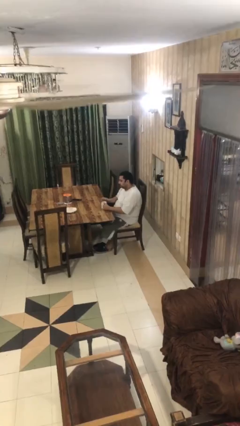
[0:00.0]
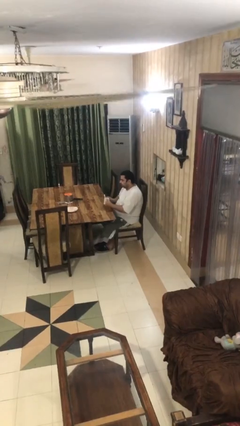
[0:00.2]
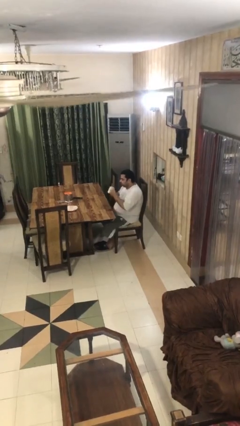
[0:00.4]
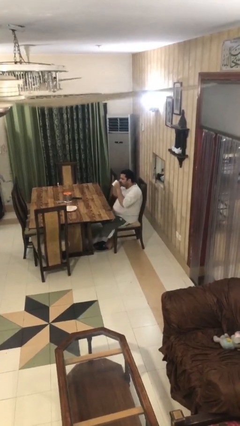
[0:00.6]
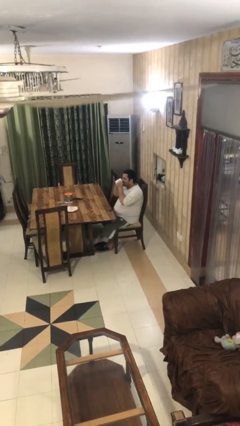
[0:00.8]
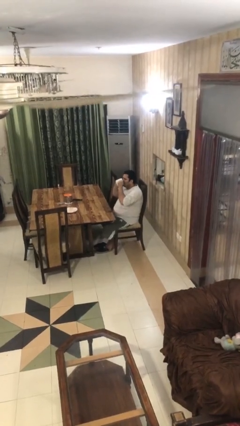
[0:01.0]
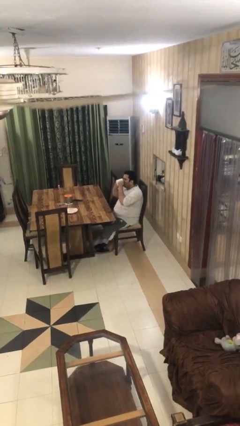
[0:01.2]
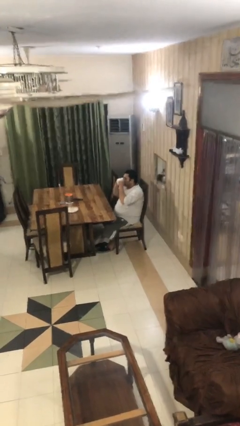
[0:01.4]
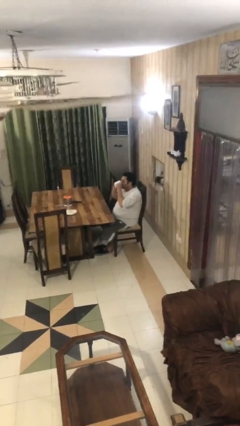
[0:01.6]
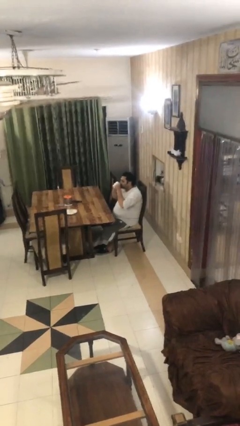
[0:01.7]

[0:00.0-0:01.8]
person drinks from mug

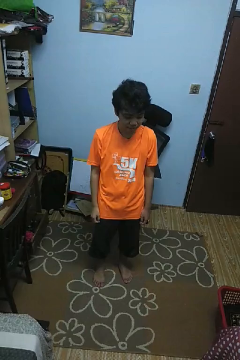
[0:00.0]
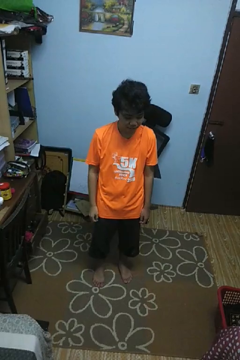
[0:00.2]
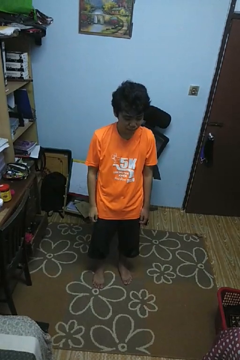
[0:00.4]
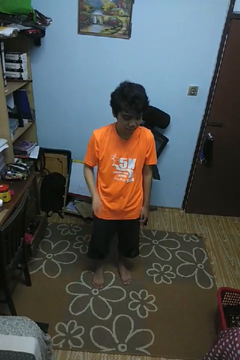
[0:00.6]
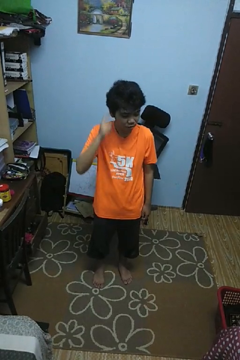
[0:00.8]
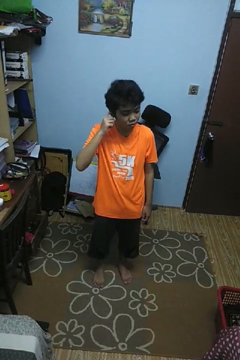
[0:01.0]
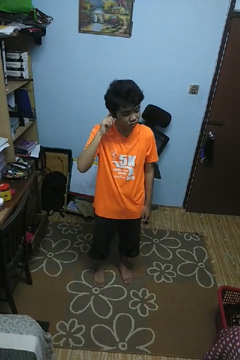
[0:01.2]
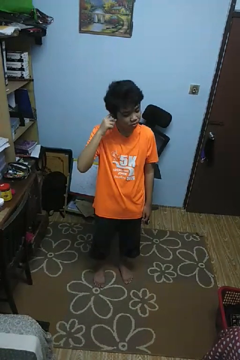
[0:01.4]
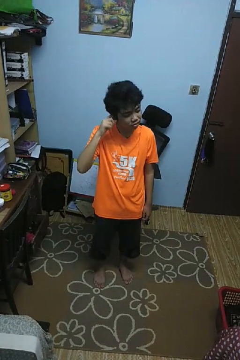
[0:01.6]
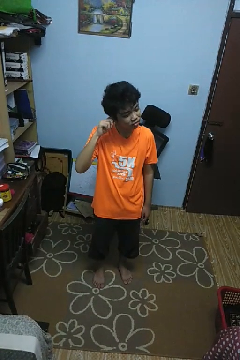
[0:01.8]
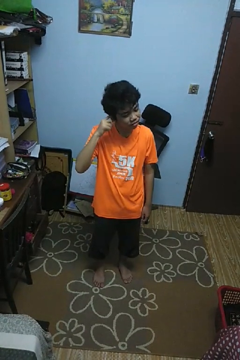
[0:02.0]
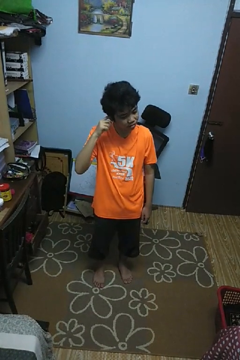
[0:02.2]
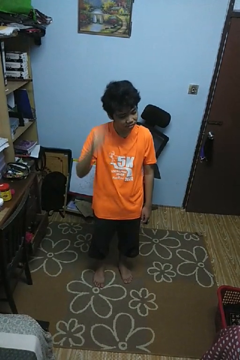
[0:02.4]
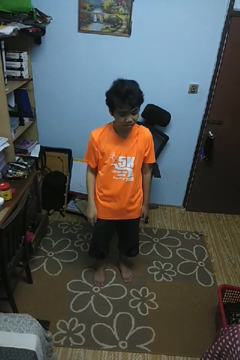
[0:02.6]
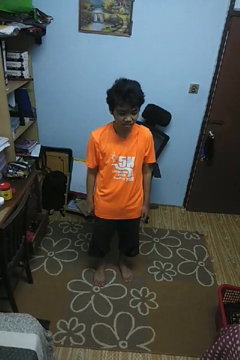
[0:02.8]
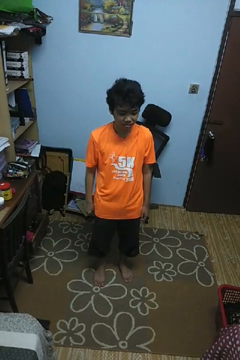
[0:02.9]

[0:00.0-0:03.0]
person puts fingers in ear

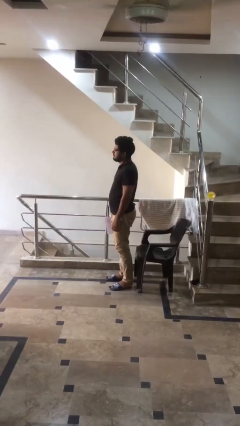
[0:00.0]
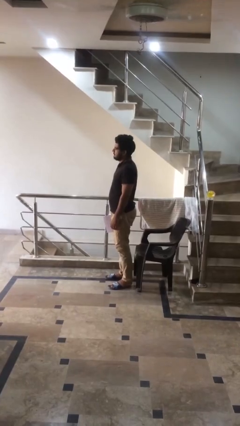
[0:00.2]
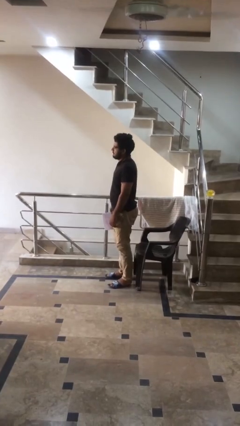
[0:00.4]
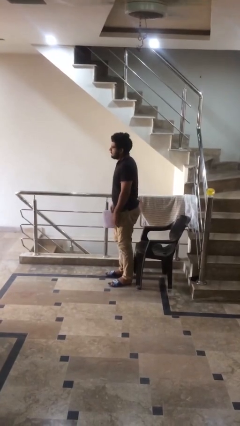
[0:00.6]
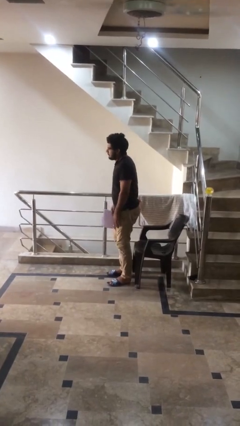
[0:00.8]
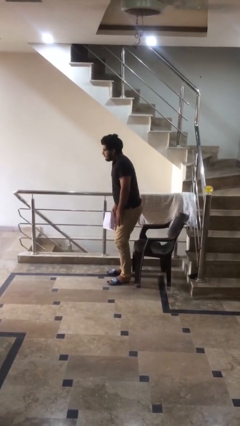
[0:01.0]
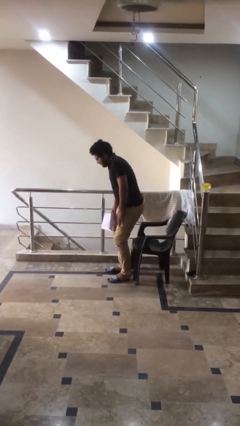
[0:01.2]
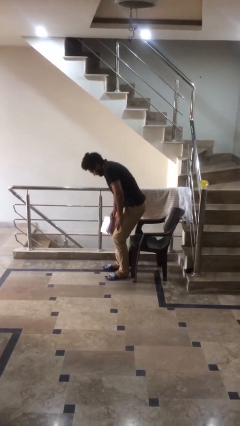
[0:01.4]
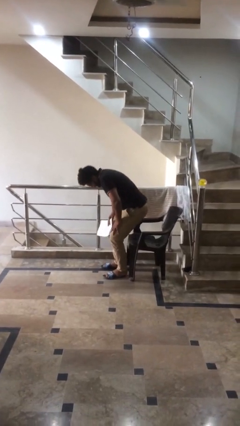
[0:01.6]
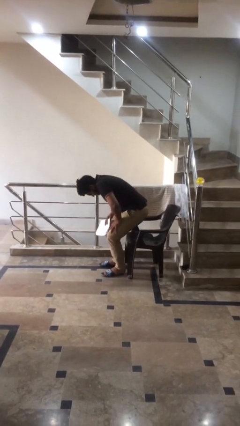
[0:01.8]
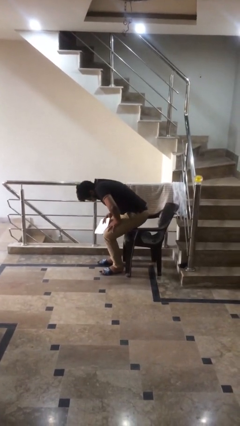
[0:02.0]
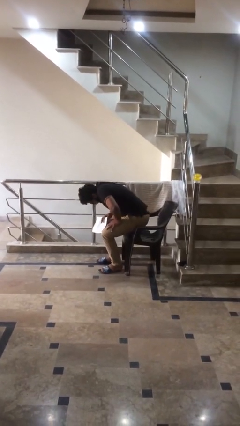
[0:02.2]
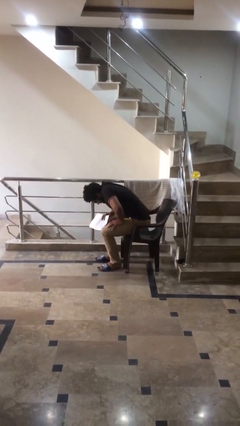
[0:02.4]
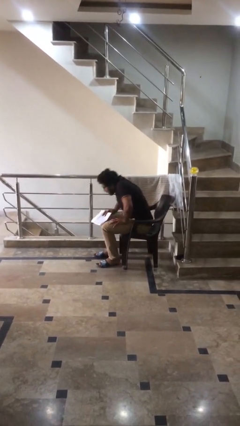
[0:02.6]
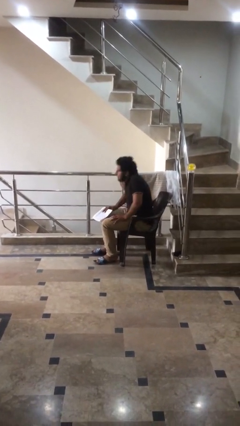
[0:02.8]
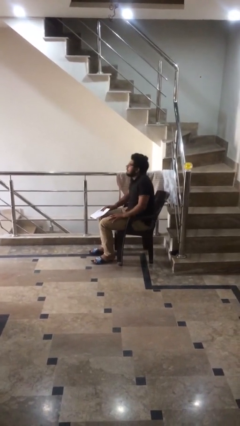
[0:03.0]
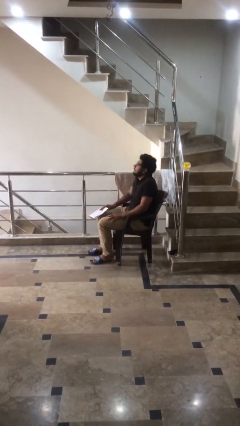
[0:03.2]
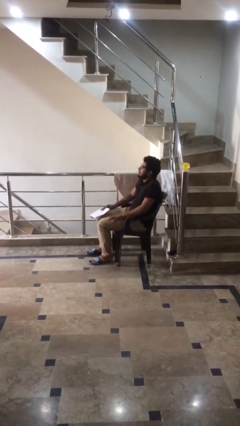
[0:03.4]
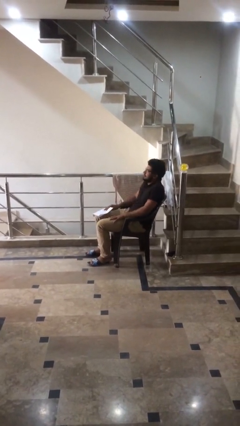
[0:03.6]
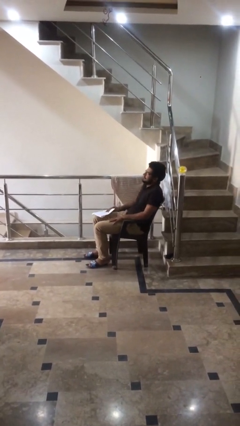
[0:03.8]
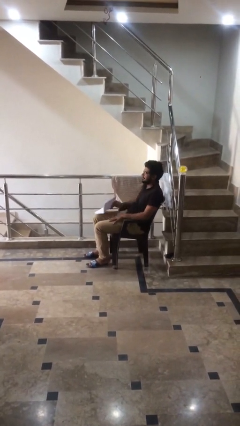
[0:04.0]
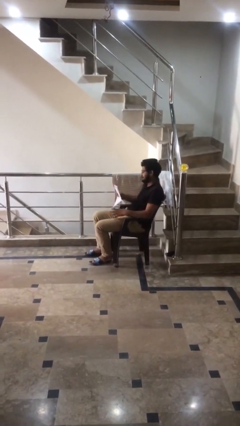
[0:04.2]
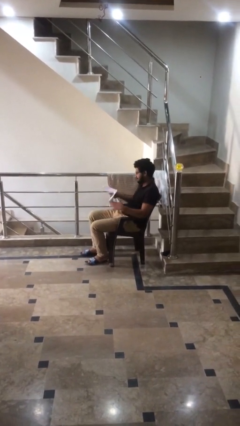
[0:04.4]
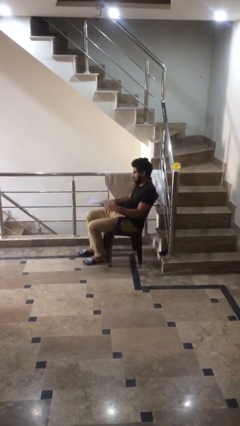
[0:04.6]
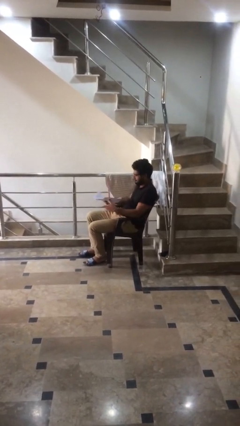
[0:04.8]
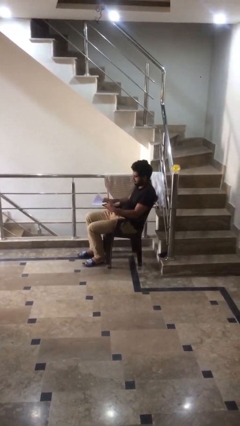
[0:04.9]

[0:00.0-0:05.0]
person sits down

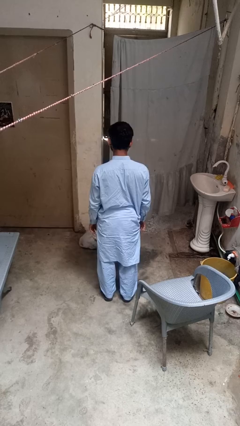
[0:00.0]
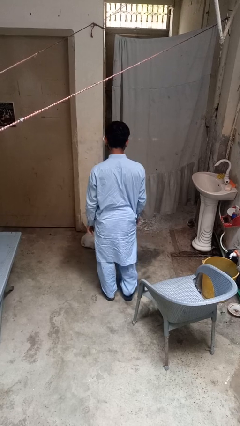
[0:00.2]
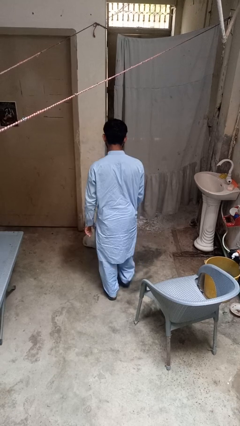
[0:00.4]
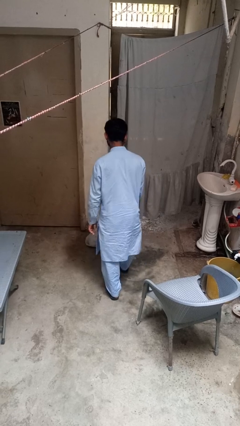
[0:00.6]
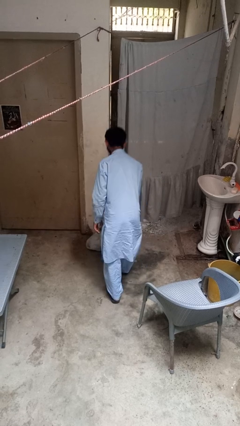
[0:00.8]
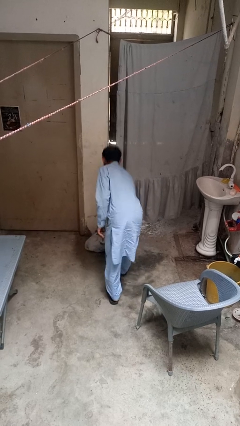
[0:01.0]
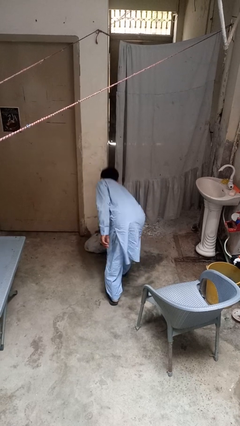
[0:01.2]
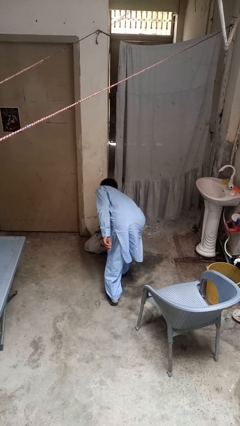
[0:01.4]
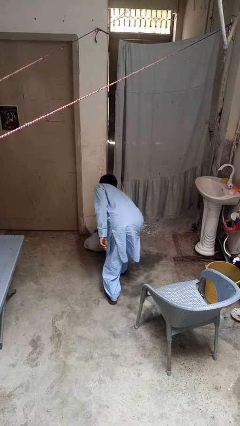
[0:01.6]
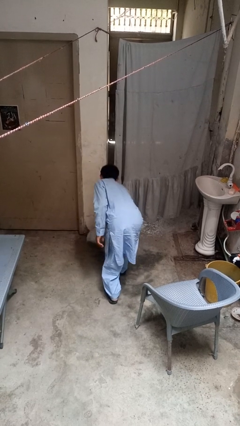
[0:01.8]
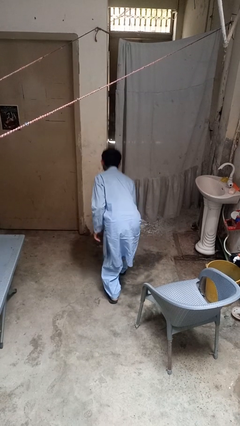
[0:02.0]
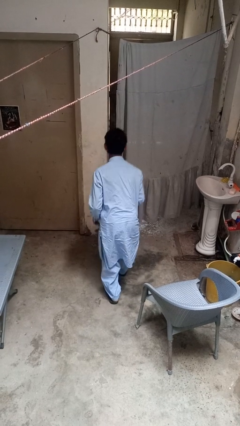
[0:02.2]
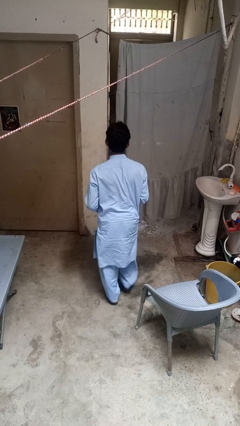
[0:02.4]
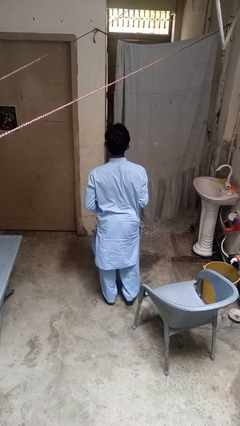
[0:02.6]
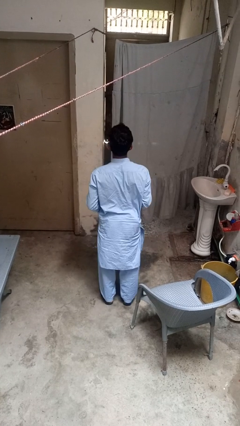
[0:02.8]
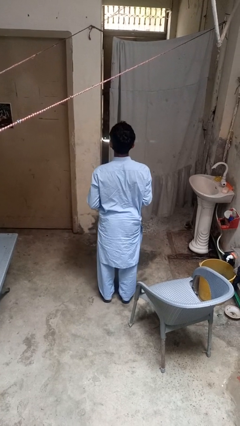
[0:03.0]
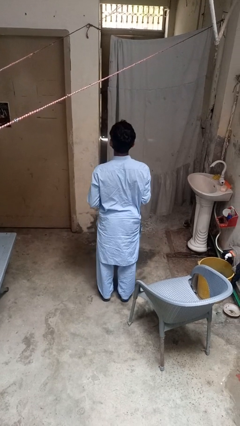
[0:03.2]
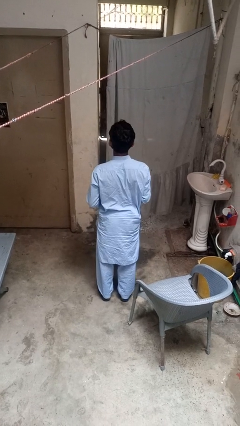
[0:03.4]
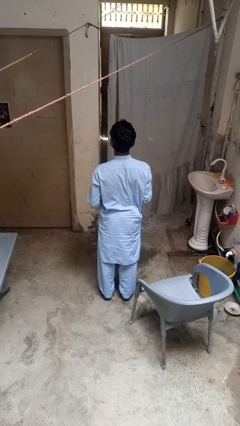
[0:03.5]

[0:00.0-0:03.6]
person picks up object from floor

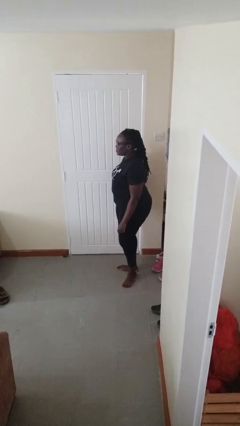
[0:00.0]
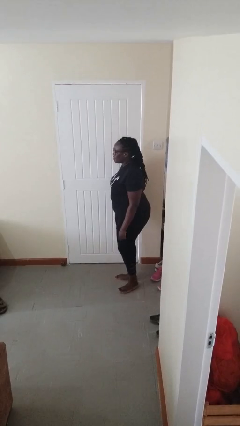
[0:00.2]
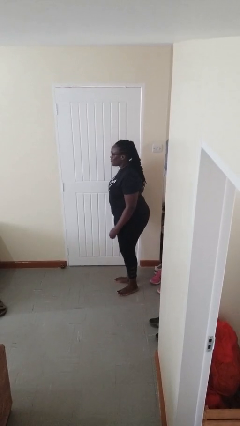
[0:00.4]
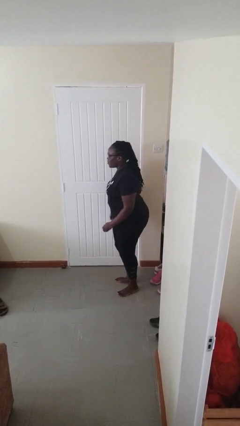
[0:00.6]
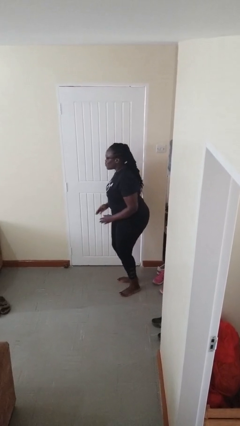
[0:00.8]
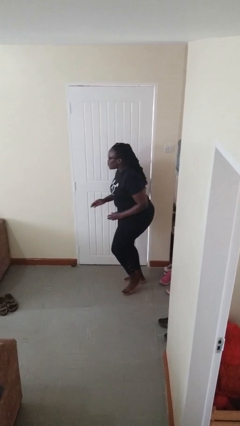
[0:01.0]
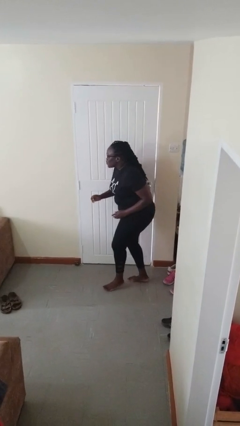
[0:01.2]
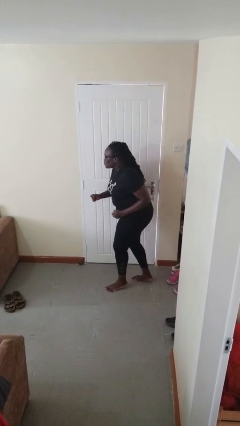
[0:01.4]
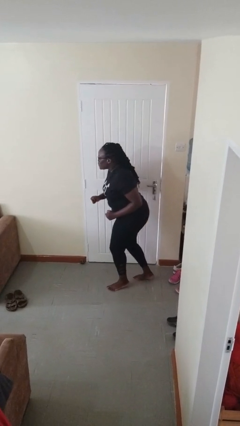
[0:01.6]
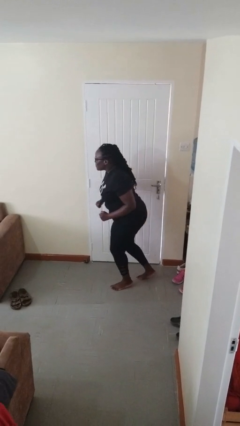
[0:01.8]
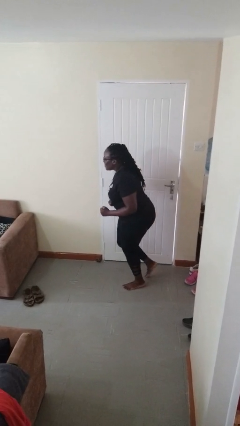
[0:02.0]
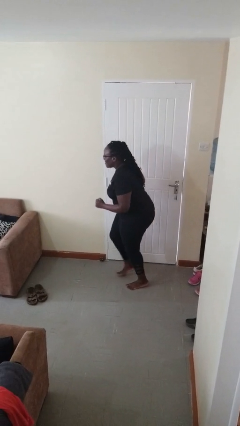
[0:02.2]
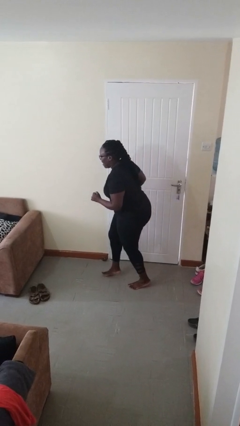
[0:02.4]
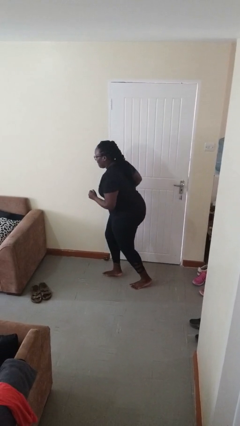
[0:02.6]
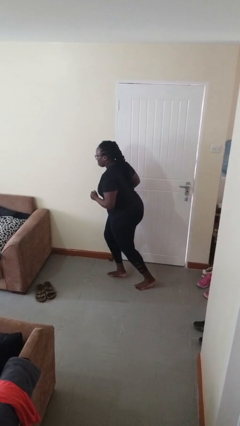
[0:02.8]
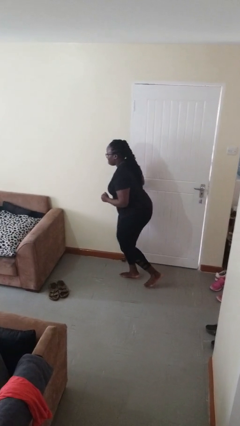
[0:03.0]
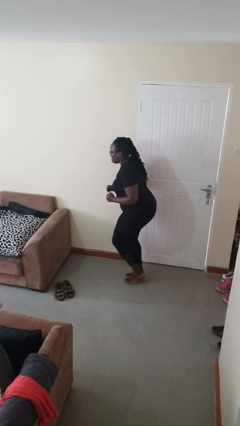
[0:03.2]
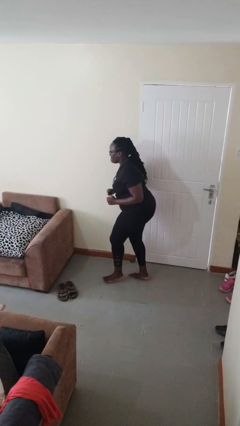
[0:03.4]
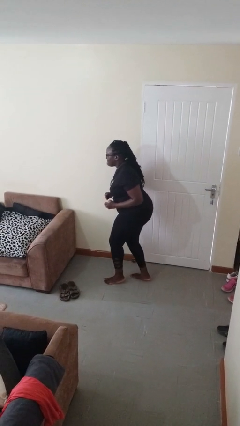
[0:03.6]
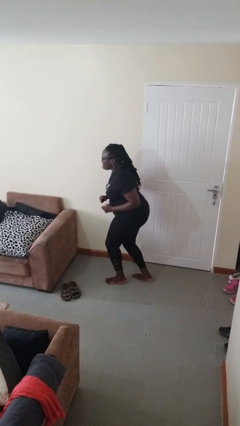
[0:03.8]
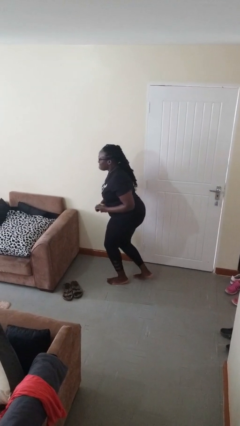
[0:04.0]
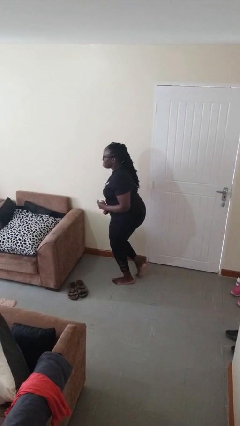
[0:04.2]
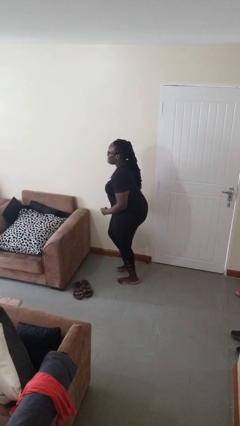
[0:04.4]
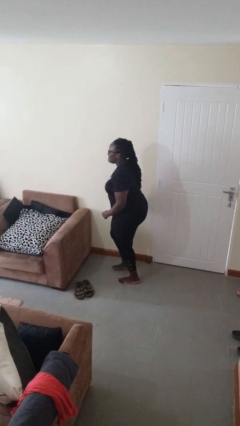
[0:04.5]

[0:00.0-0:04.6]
person walks tiptoe

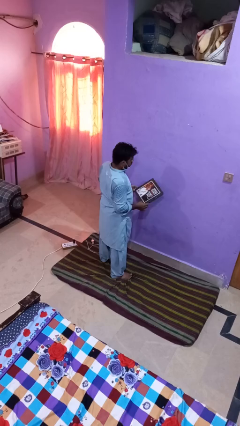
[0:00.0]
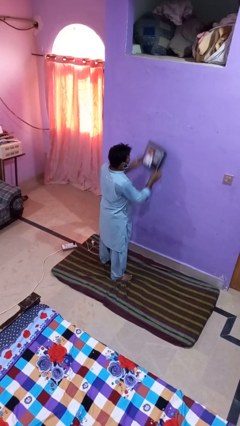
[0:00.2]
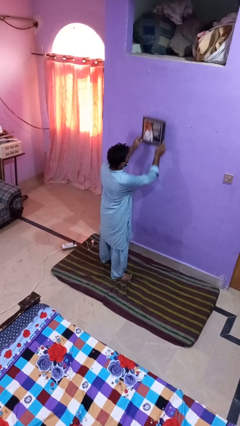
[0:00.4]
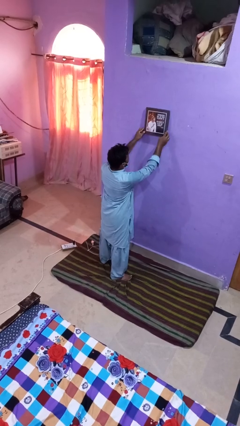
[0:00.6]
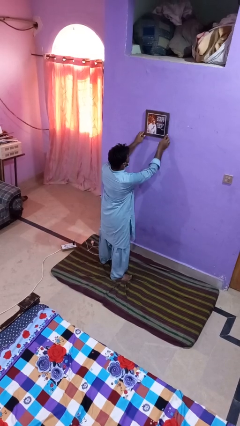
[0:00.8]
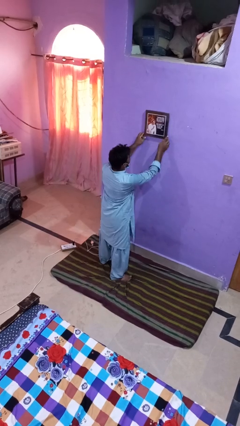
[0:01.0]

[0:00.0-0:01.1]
person puts up picture frame
